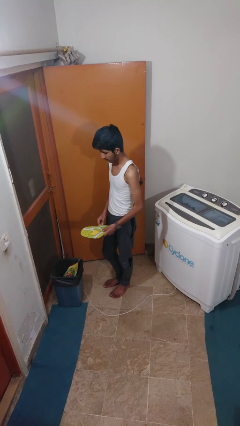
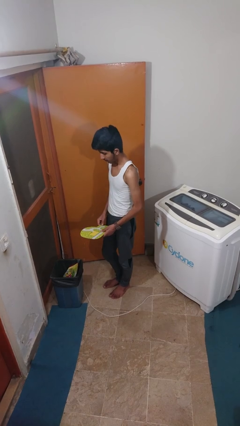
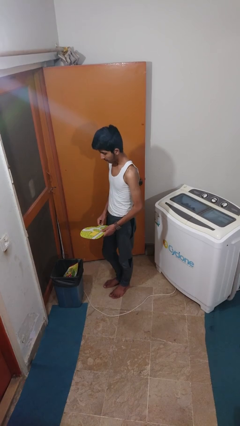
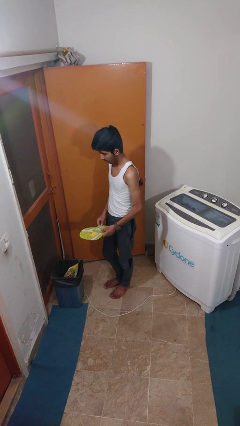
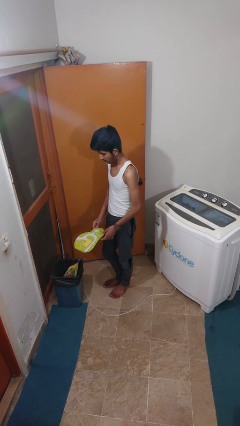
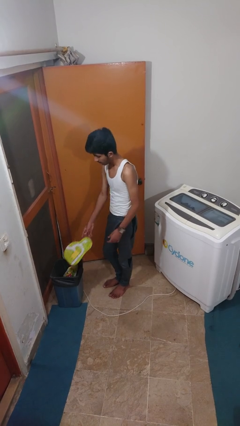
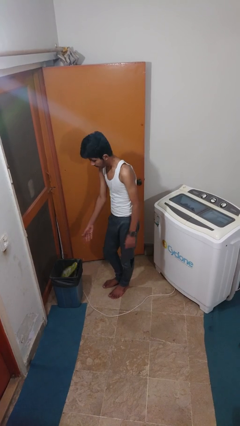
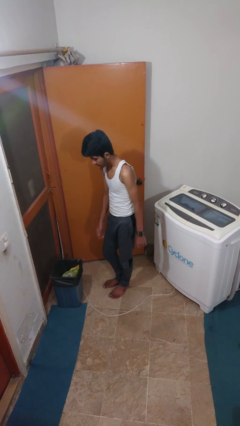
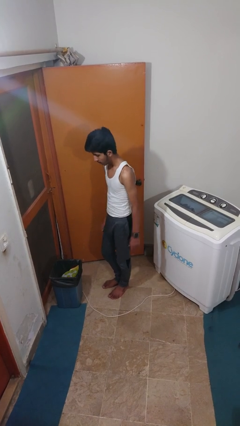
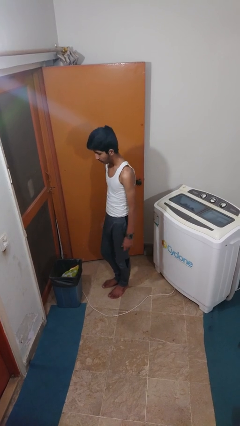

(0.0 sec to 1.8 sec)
person discards trash

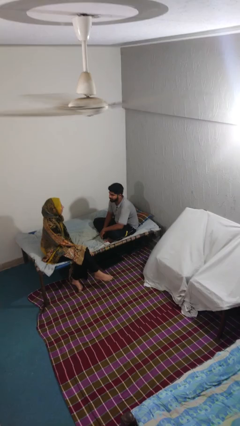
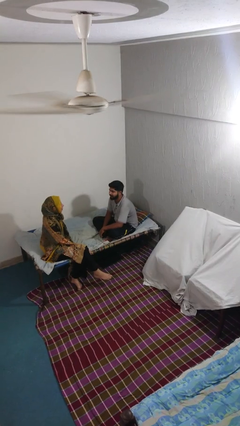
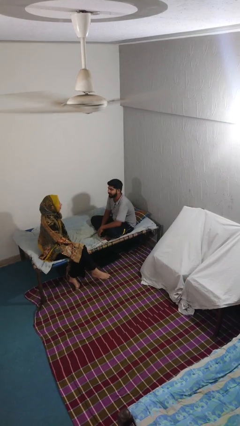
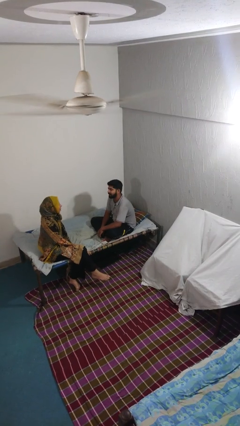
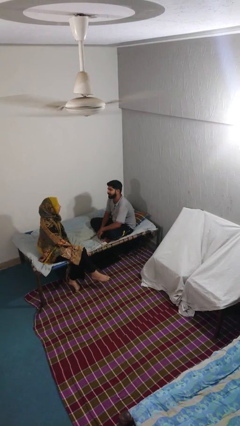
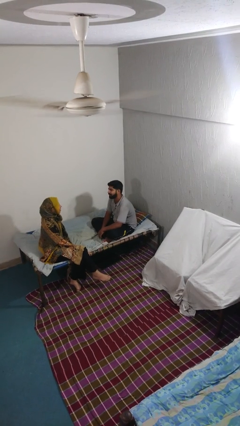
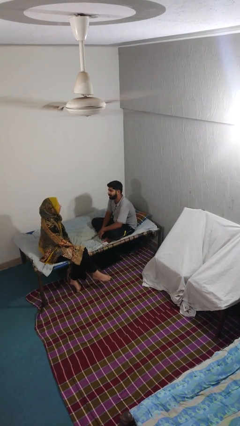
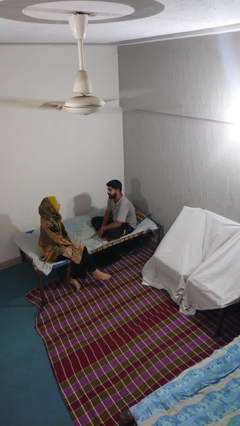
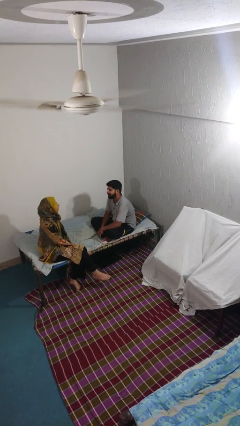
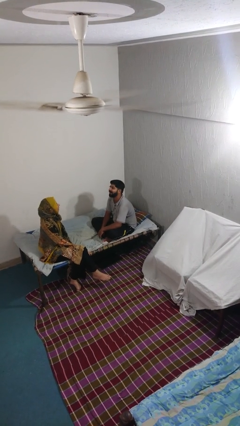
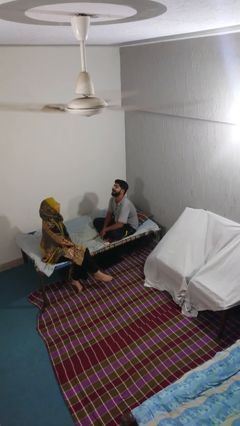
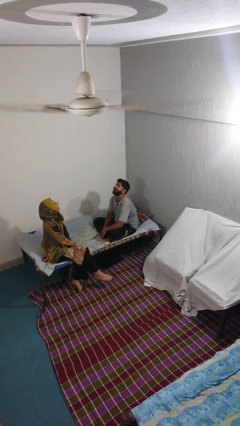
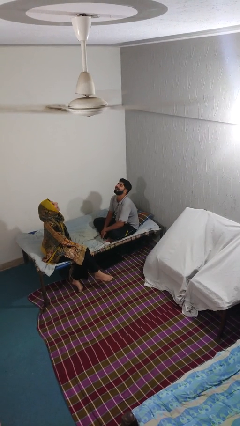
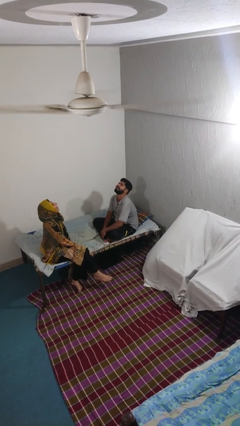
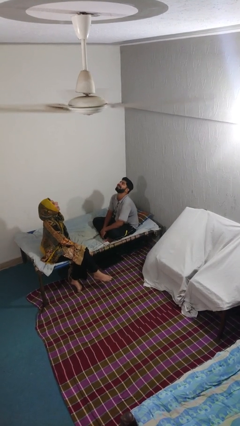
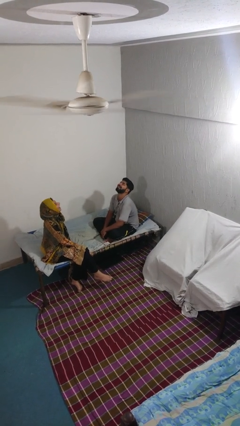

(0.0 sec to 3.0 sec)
person laughs with person

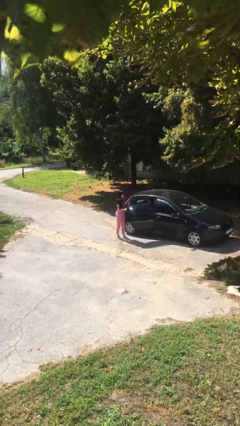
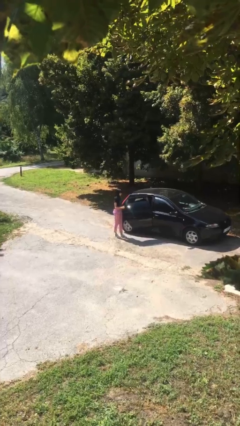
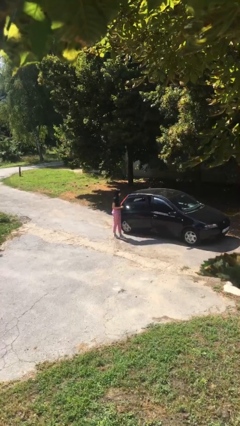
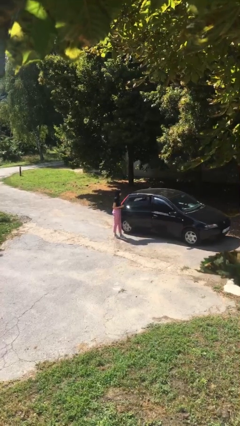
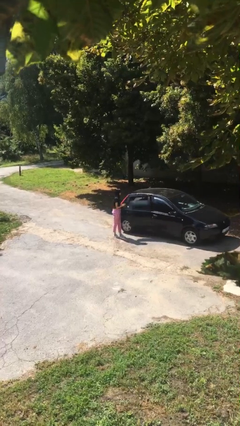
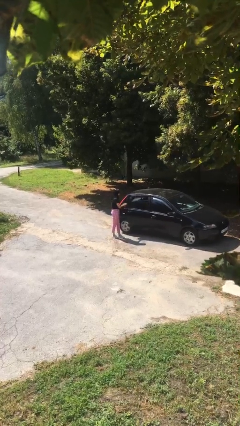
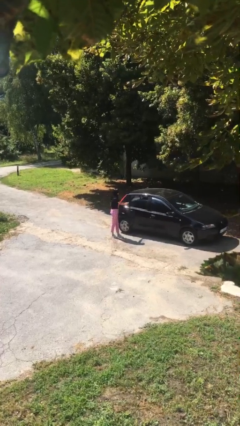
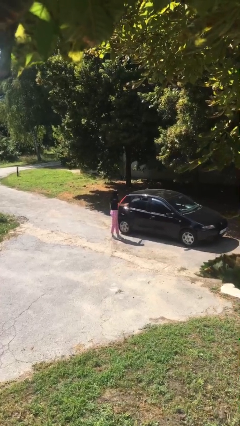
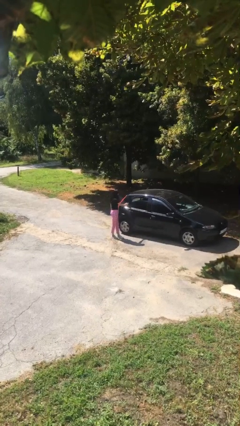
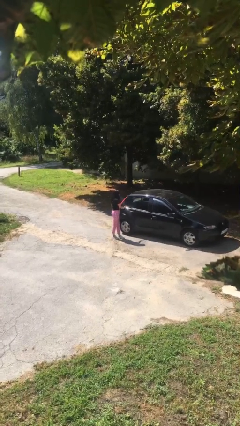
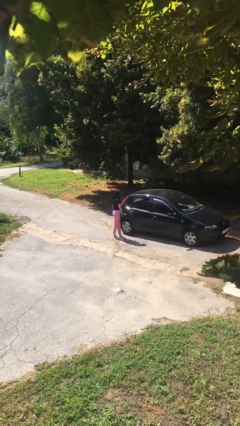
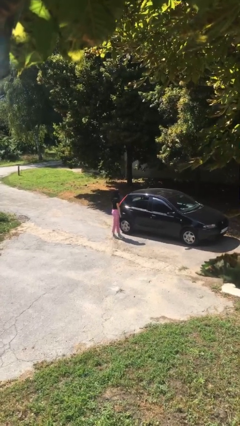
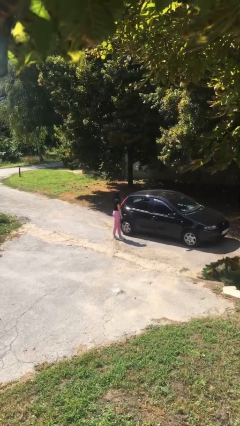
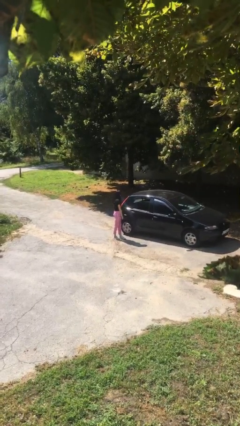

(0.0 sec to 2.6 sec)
person closes car door

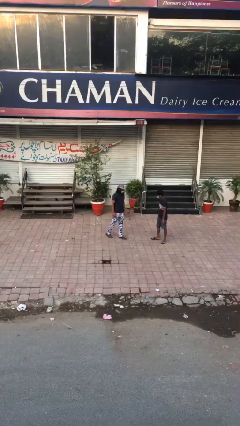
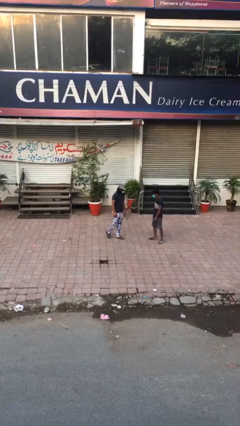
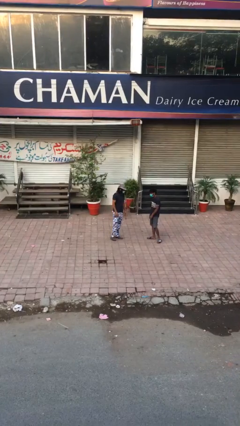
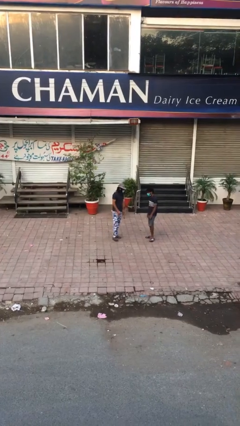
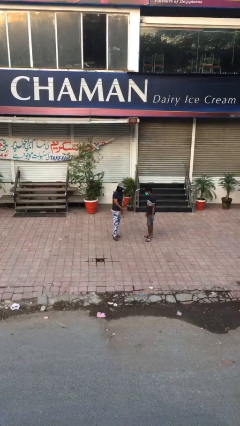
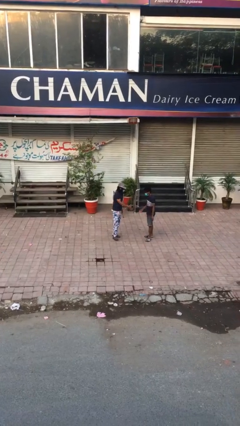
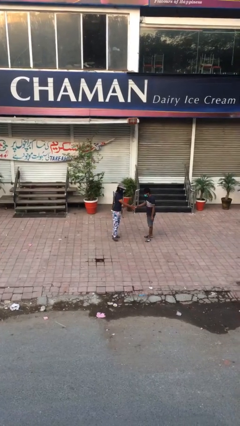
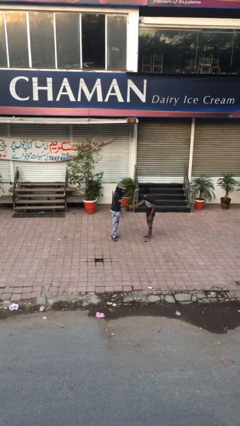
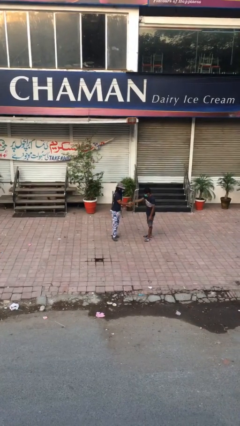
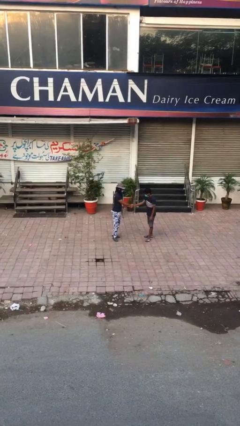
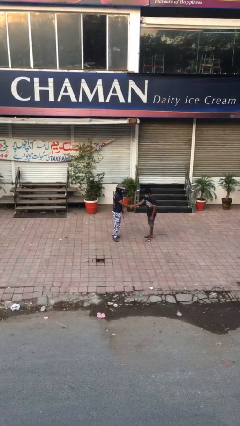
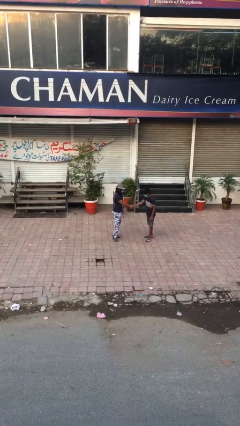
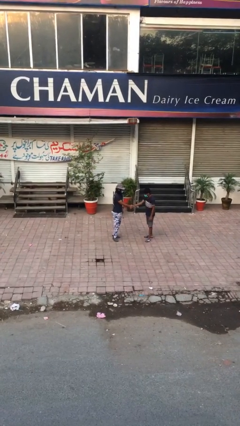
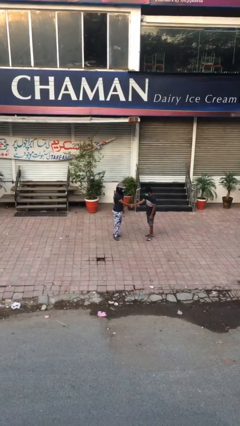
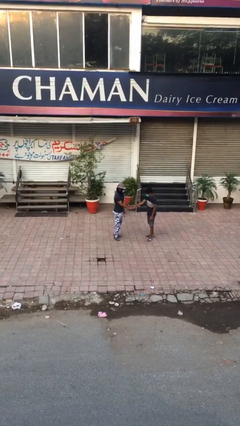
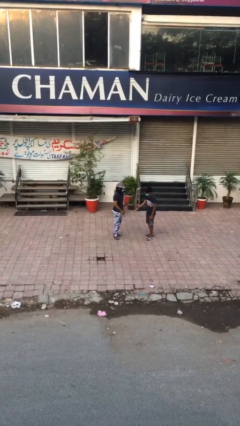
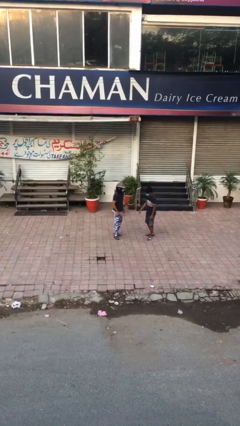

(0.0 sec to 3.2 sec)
person shakes hand

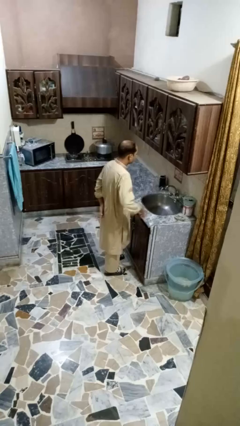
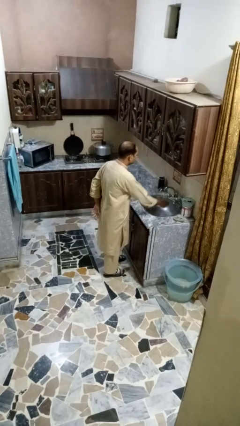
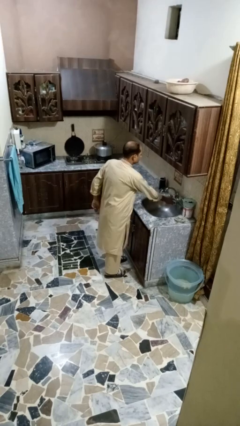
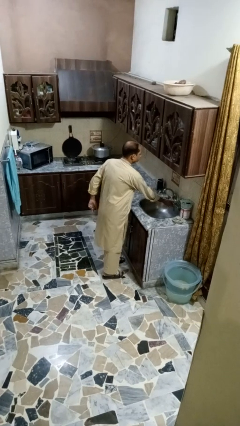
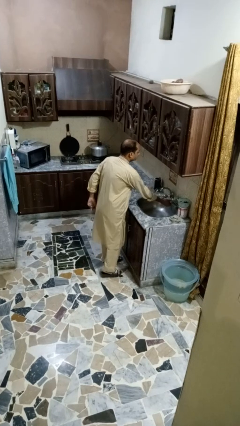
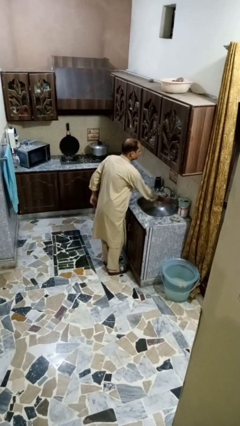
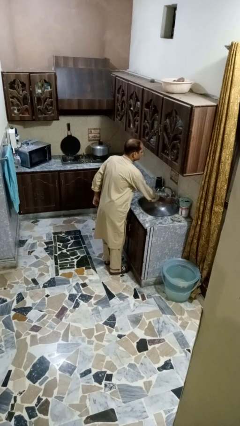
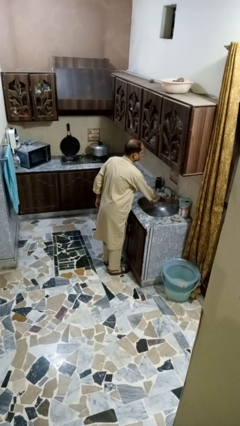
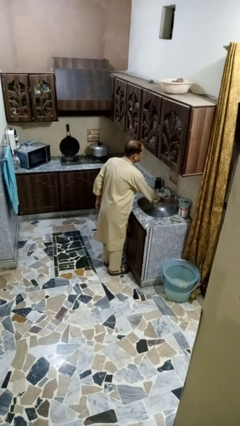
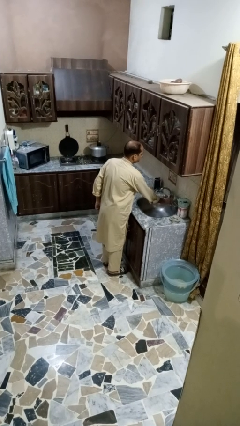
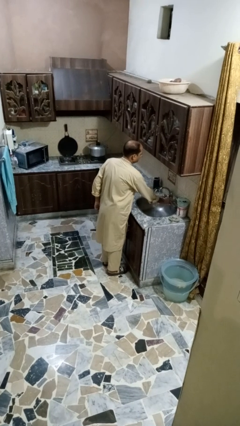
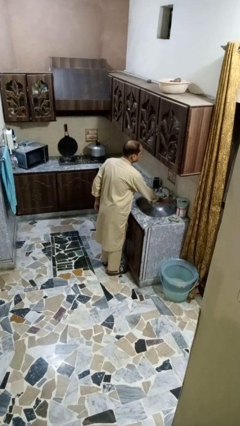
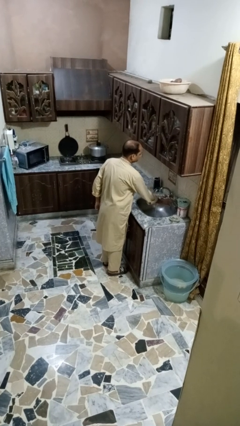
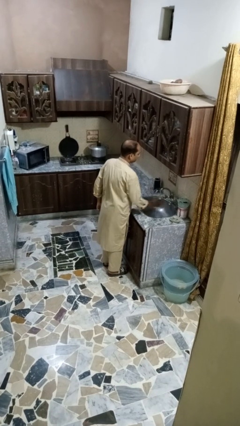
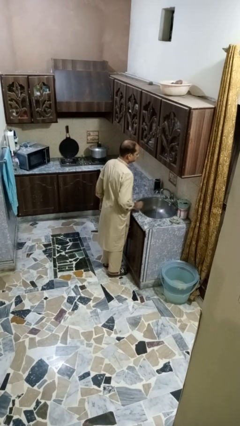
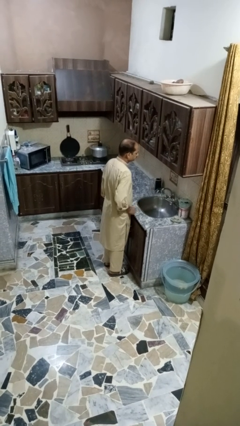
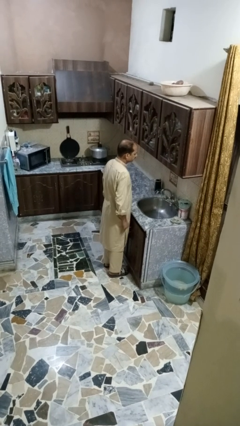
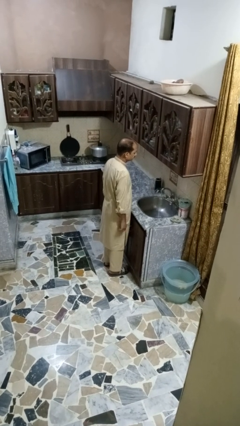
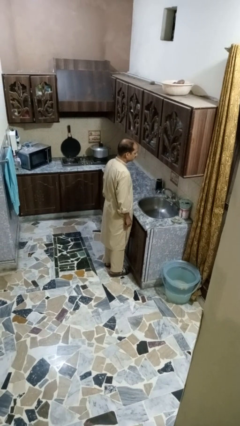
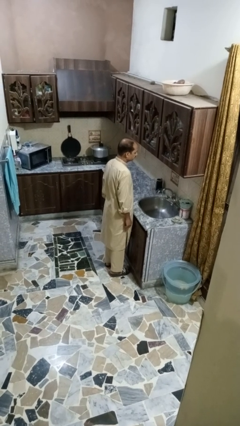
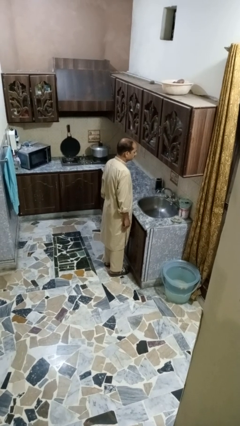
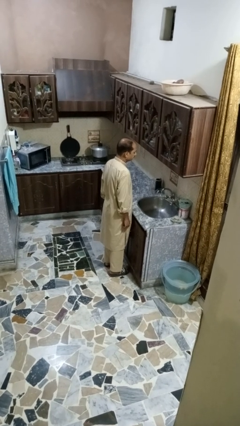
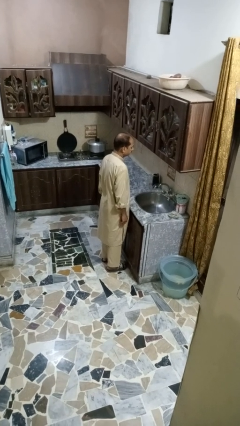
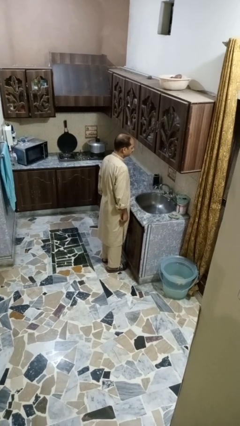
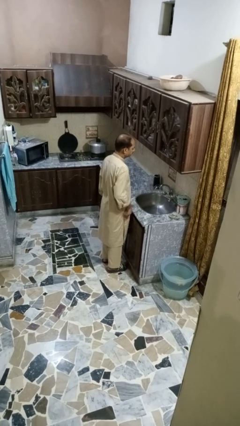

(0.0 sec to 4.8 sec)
person turns on faucet

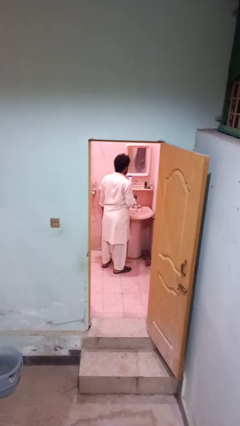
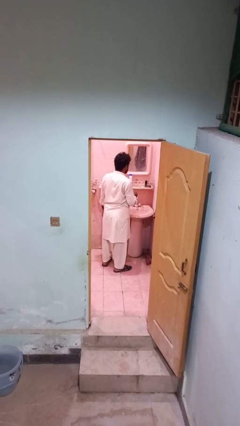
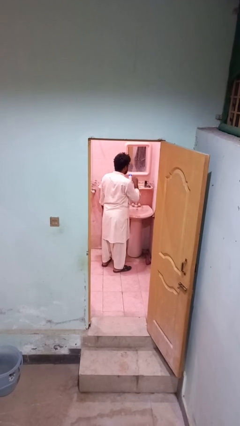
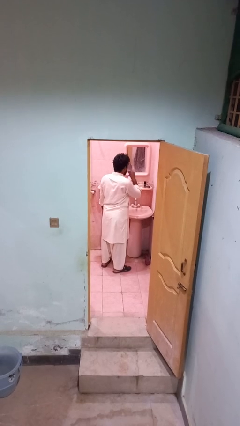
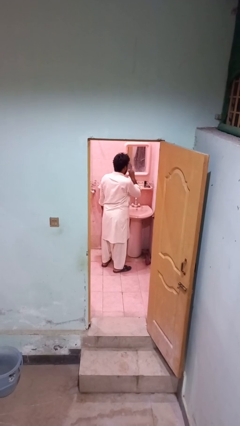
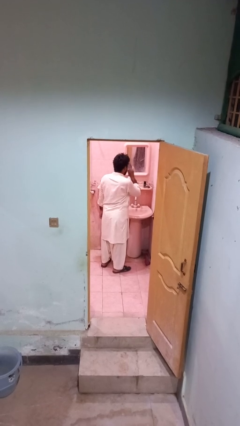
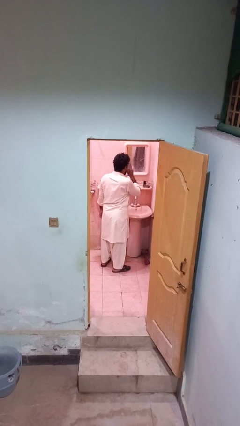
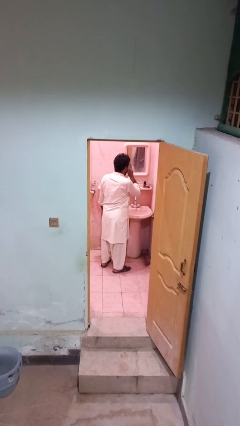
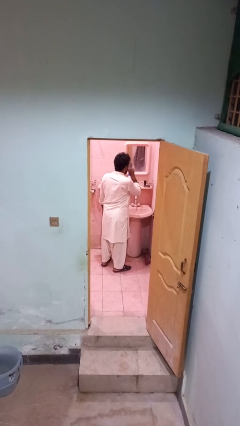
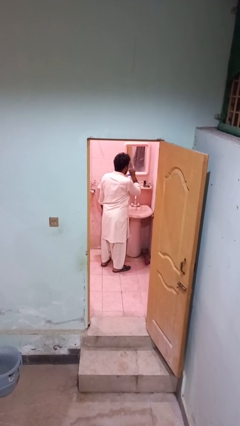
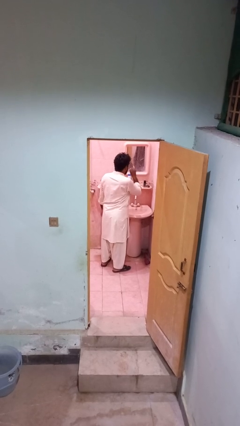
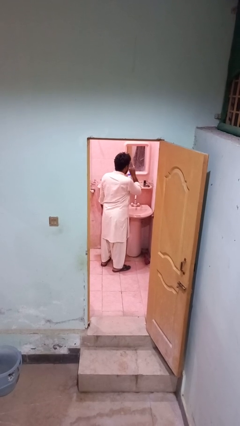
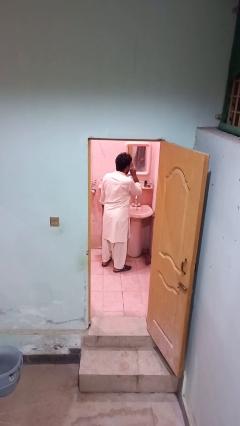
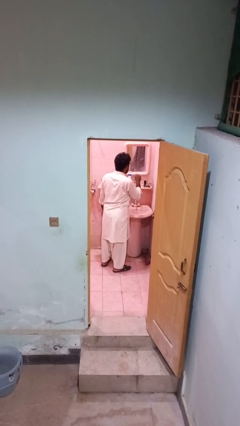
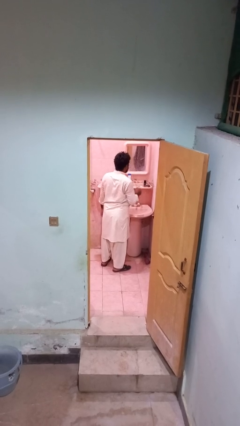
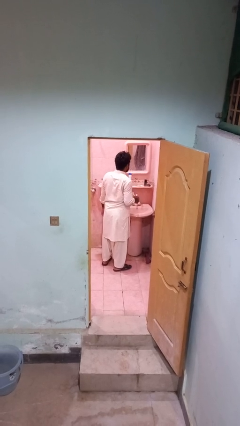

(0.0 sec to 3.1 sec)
person brushes teeth
